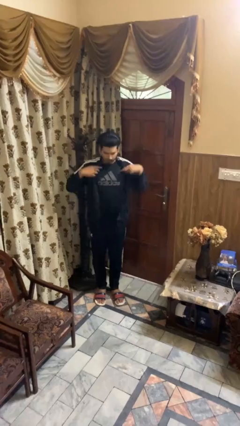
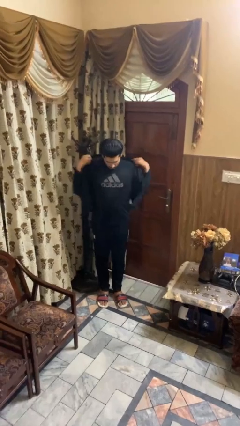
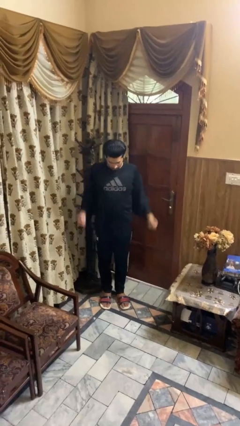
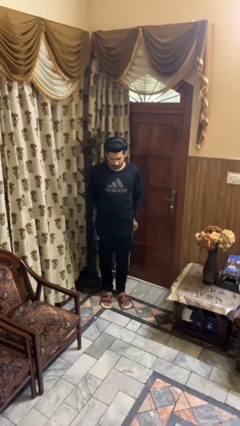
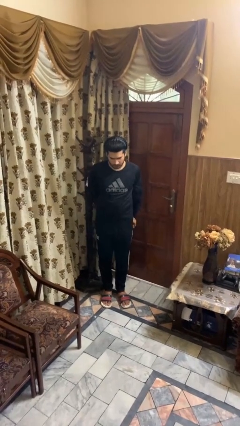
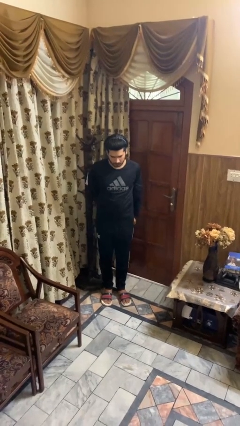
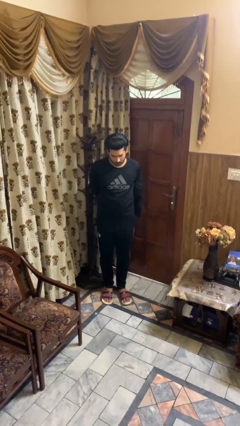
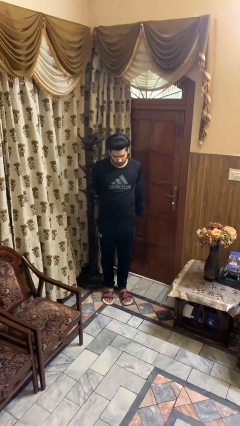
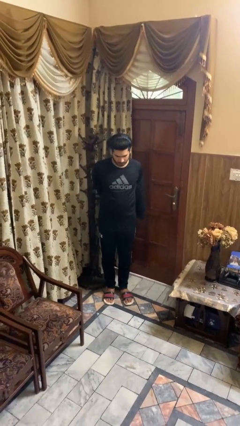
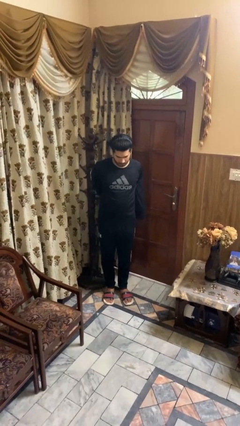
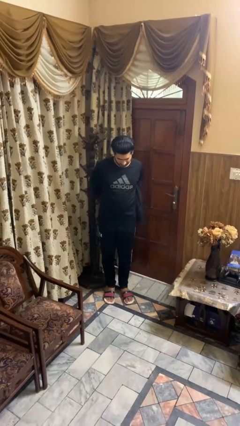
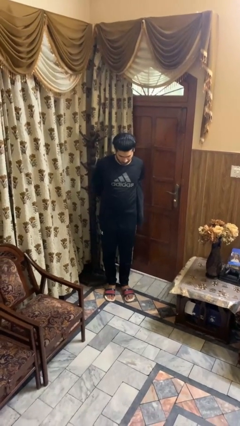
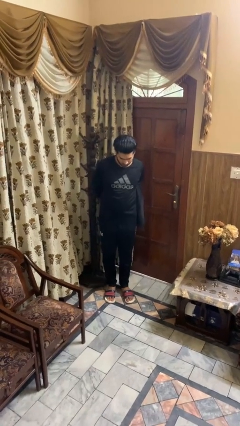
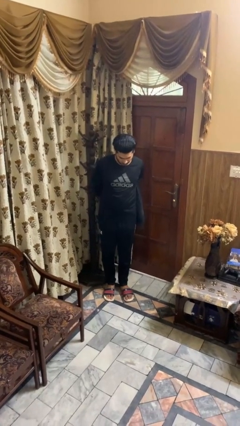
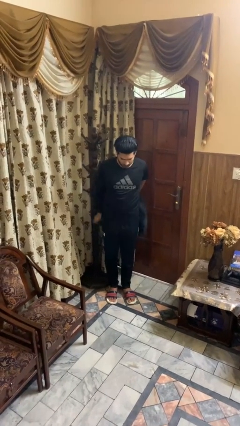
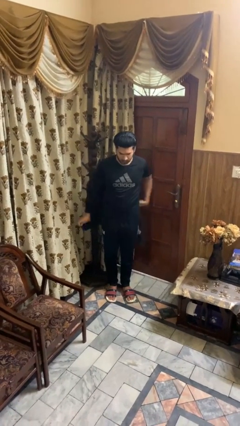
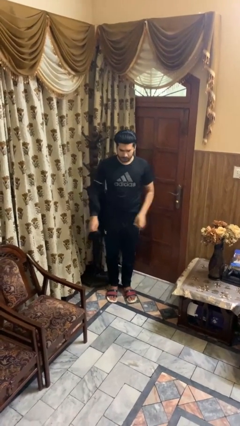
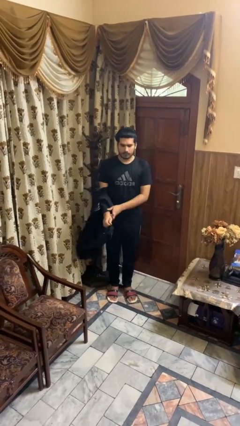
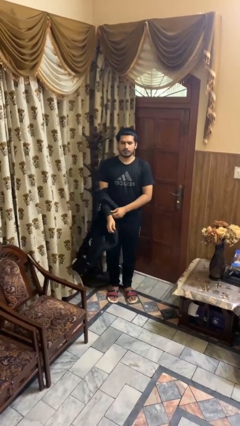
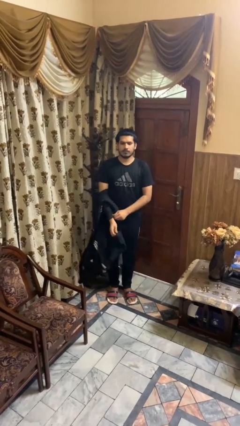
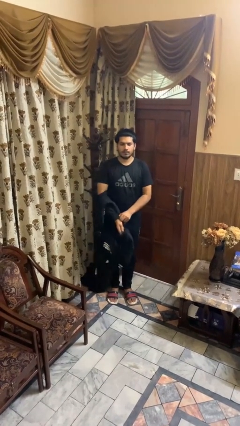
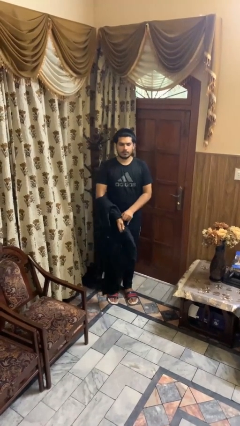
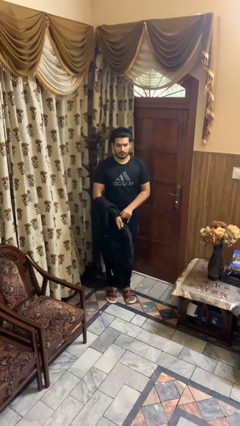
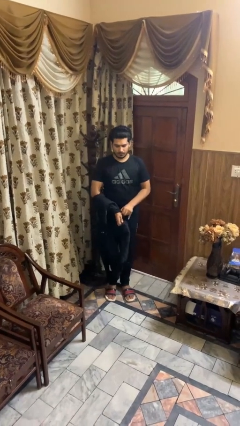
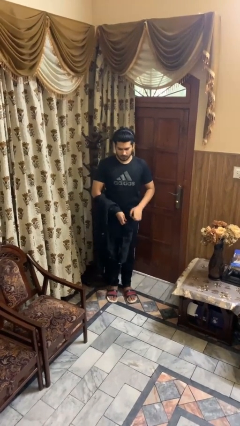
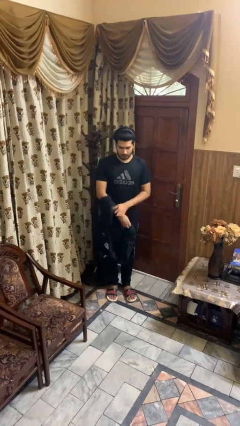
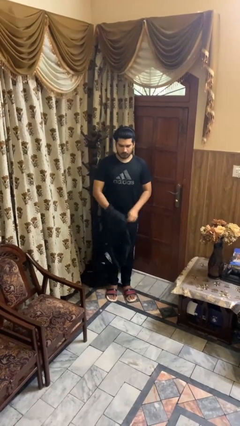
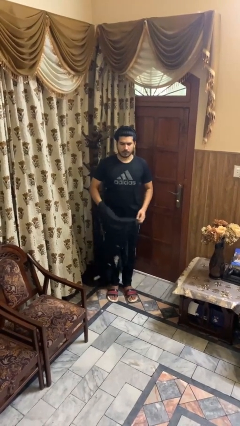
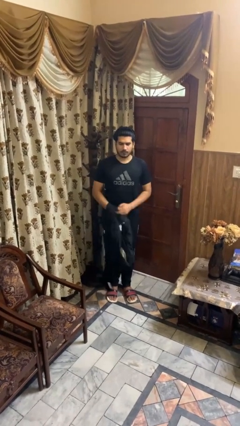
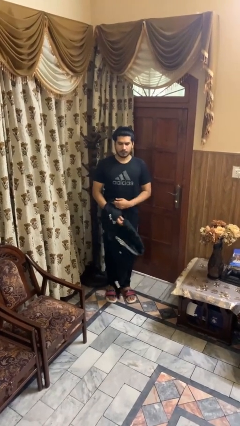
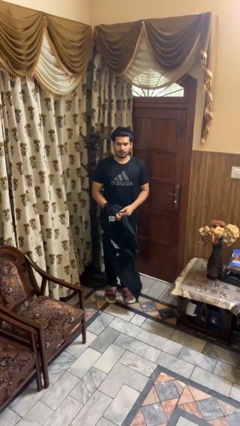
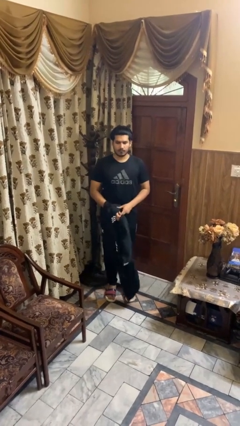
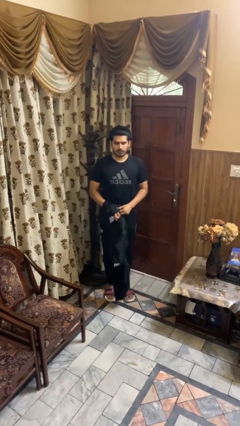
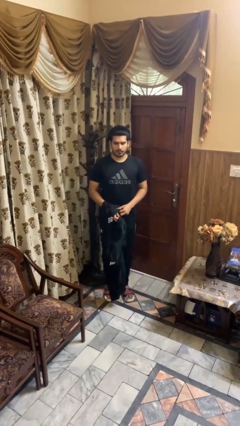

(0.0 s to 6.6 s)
person takes off jacket

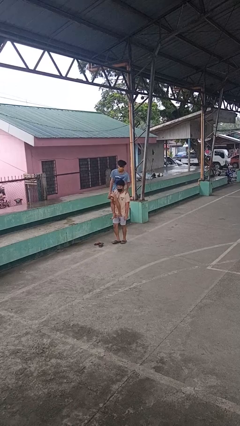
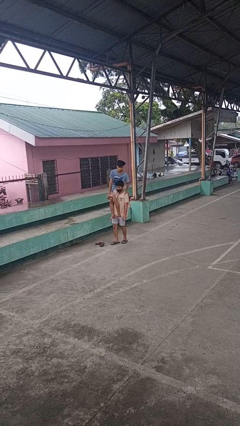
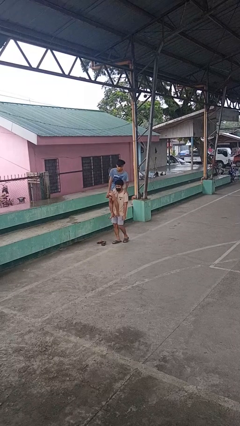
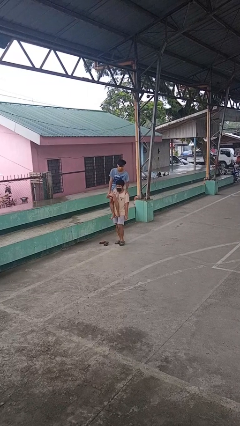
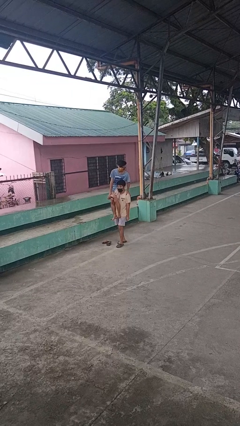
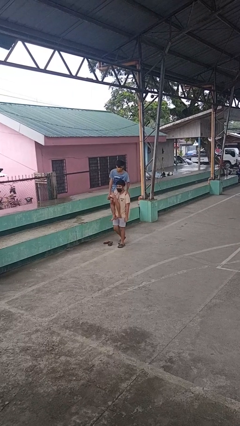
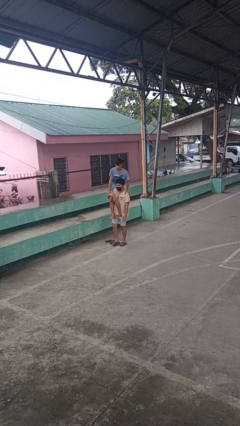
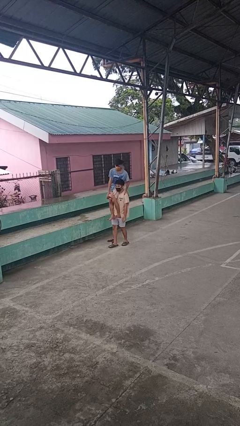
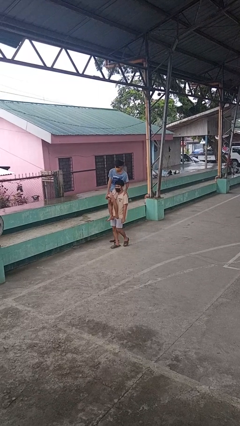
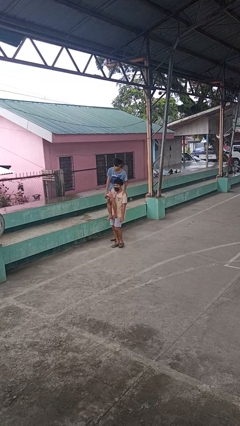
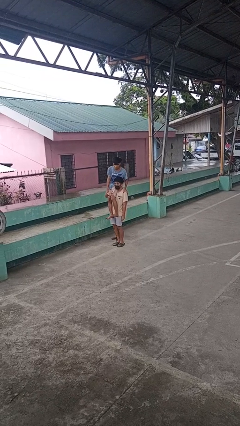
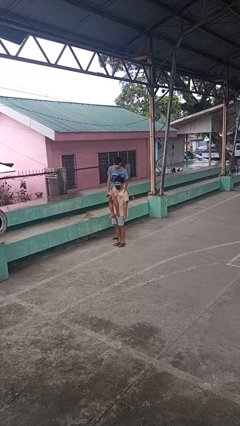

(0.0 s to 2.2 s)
person carries person on shoulders

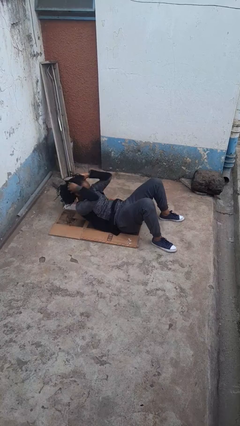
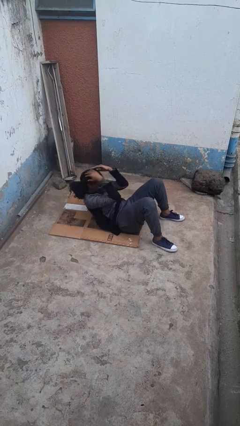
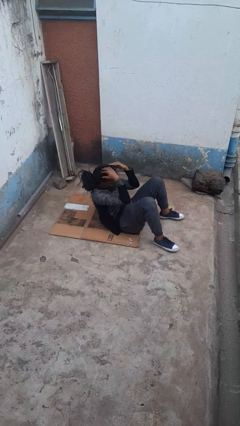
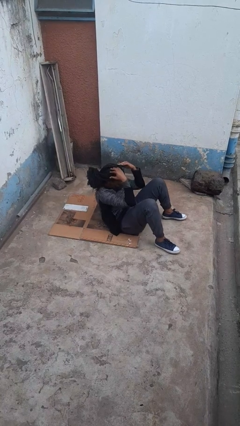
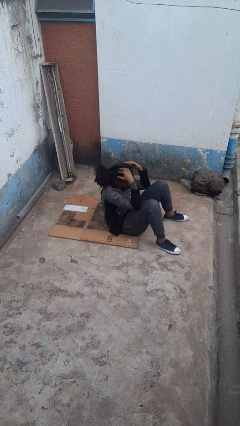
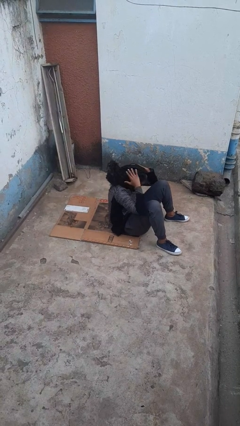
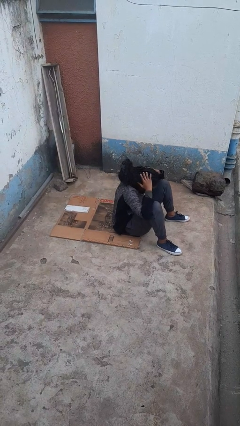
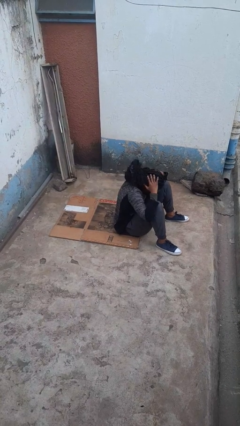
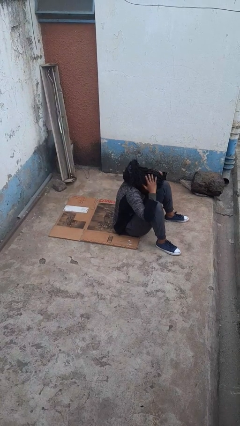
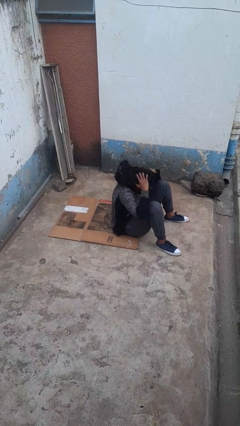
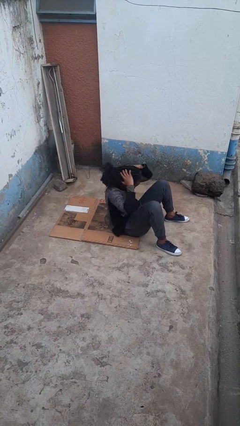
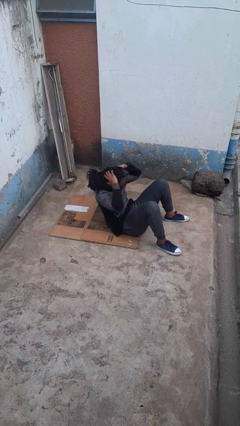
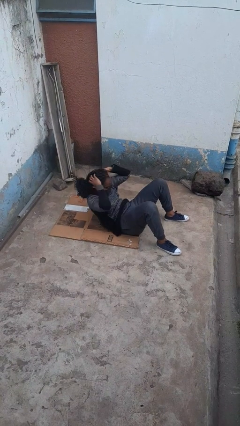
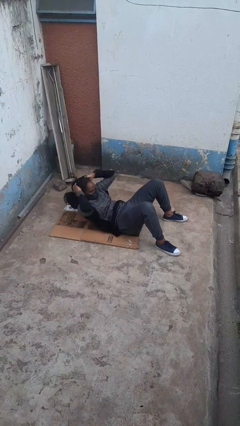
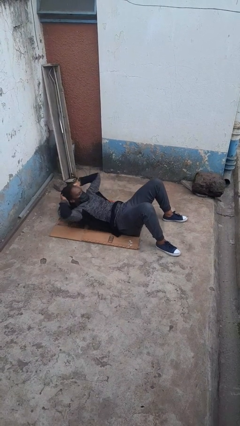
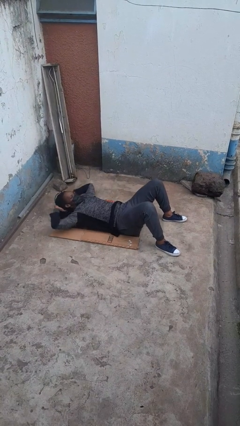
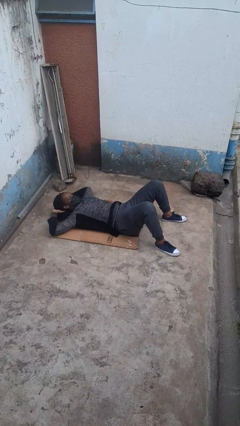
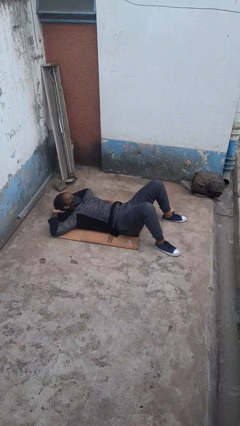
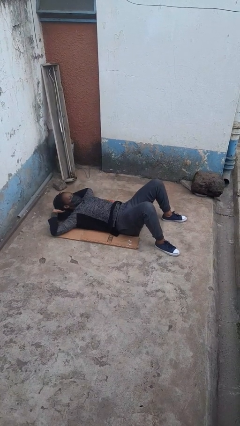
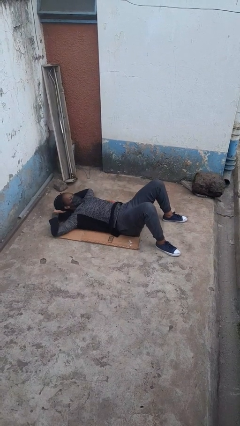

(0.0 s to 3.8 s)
person exercises with situp

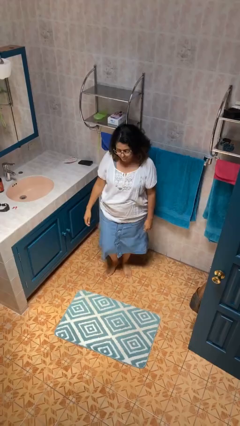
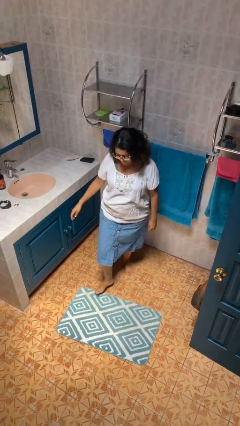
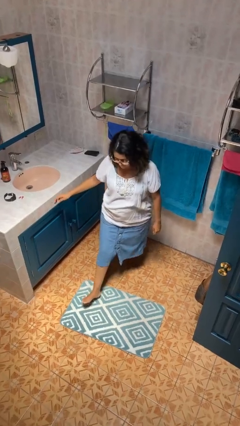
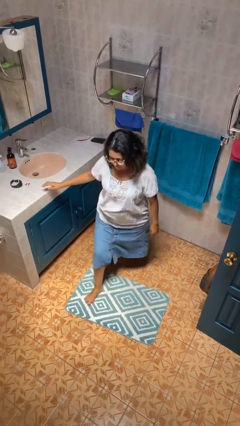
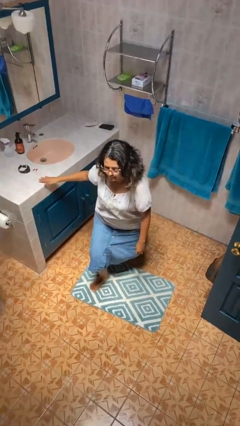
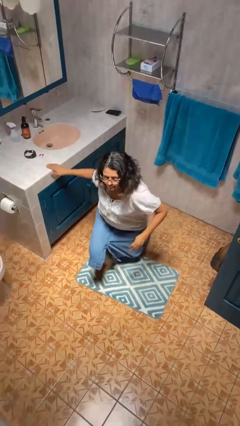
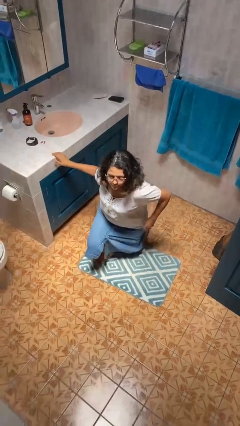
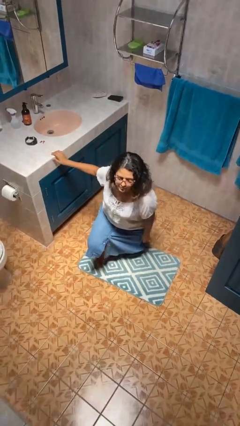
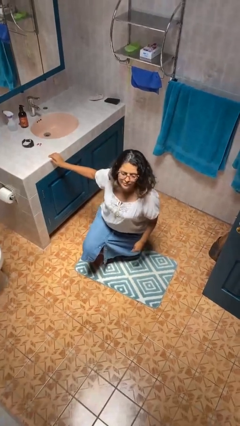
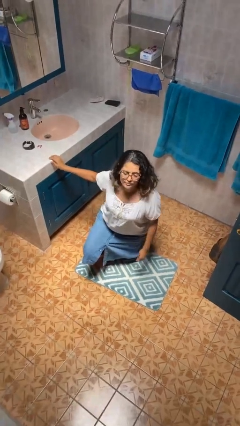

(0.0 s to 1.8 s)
person kneels

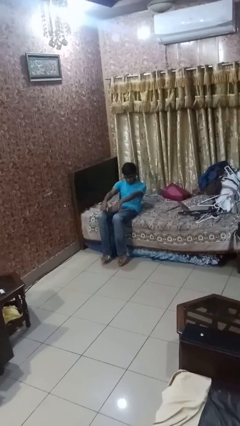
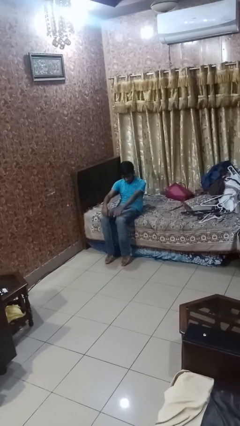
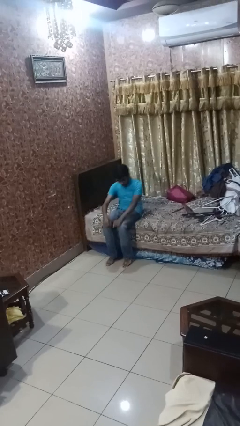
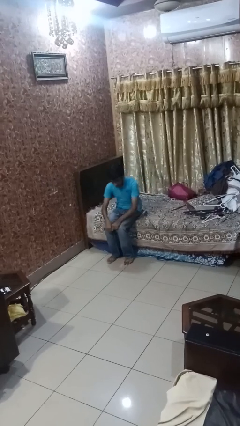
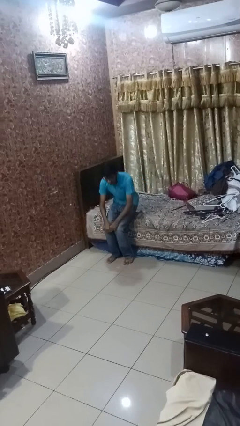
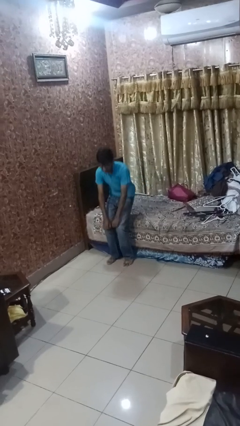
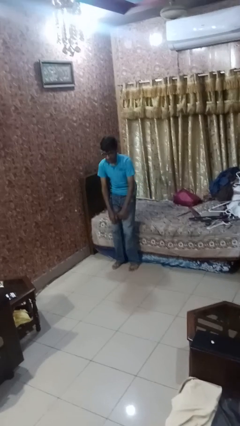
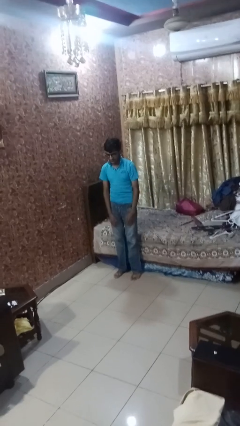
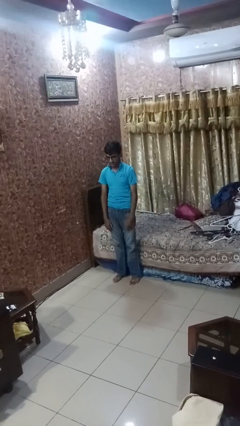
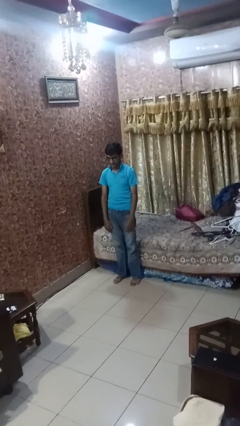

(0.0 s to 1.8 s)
person stands up

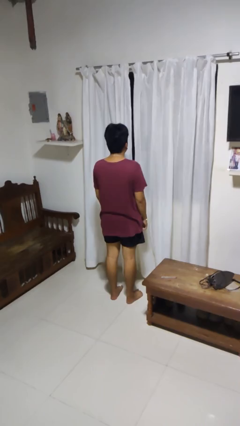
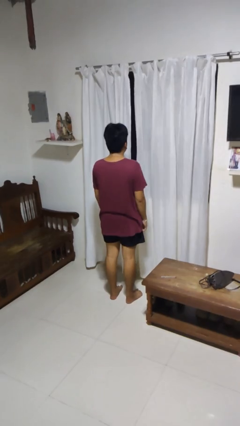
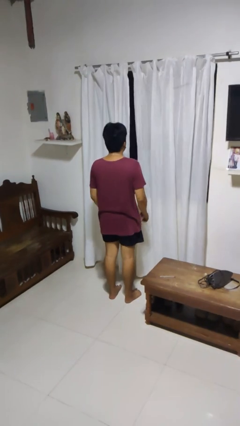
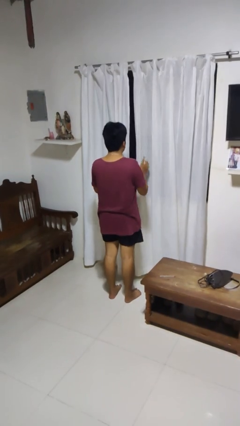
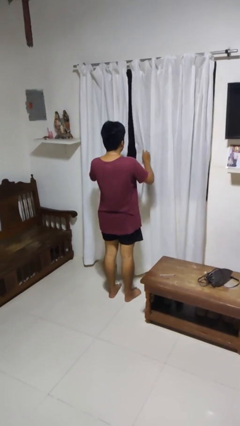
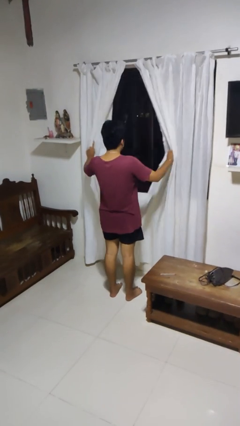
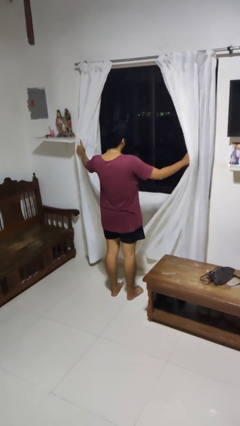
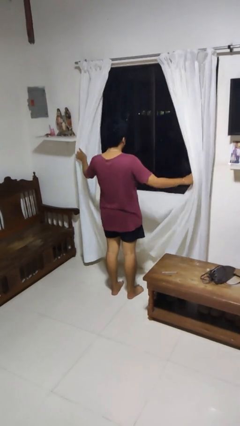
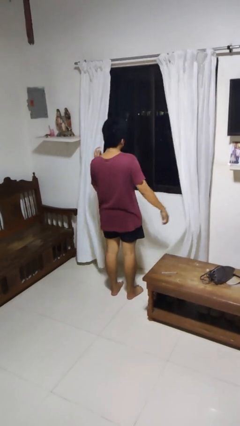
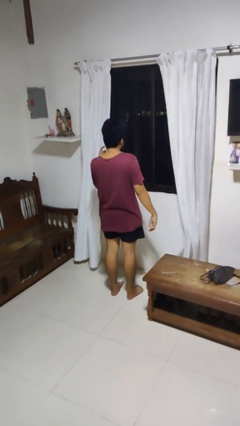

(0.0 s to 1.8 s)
person opens curtains
